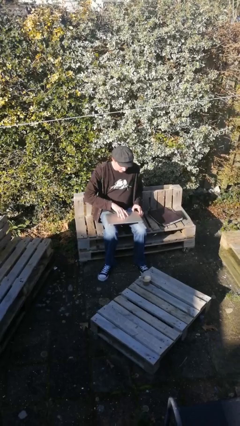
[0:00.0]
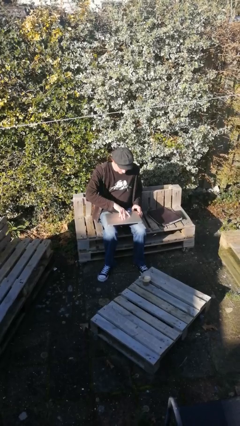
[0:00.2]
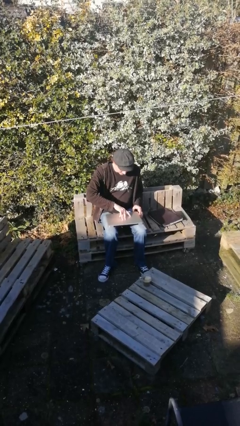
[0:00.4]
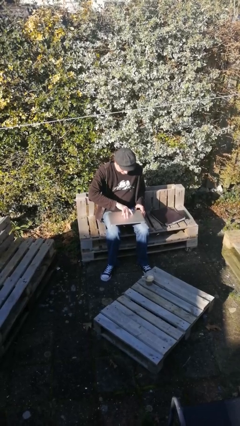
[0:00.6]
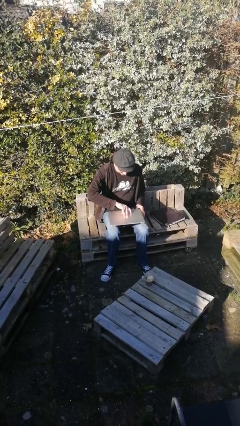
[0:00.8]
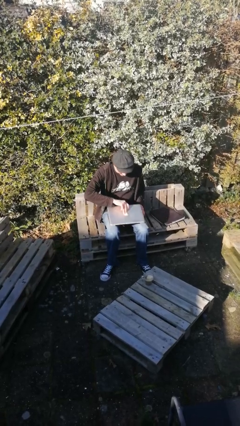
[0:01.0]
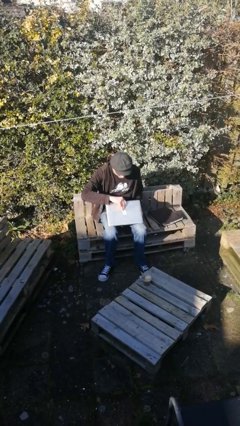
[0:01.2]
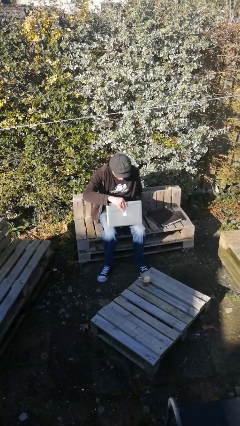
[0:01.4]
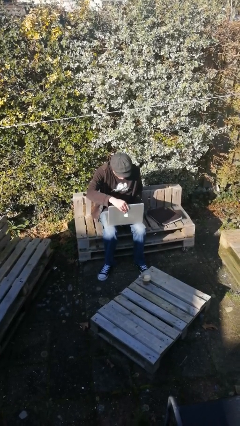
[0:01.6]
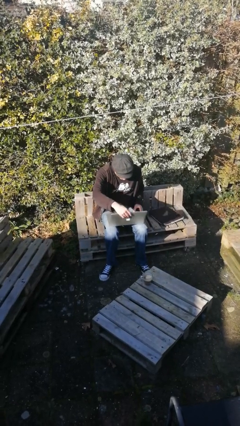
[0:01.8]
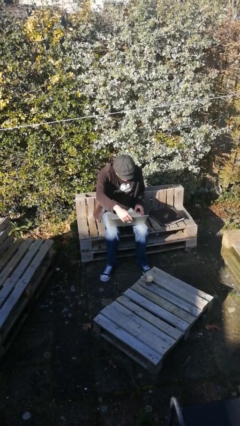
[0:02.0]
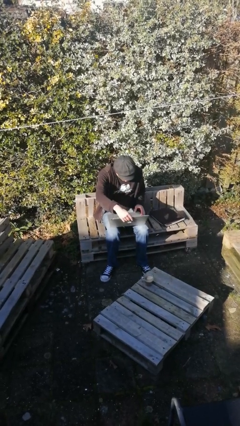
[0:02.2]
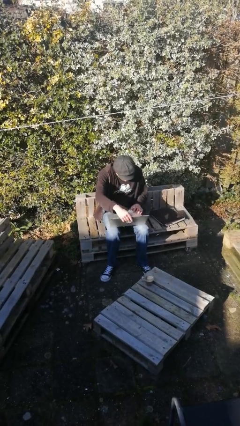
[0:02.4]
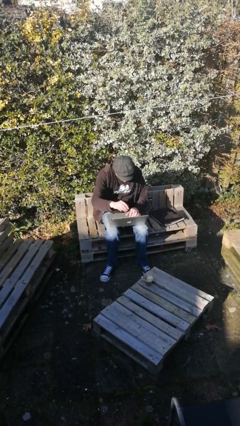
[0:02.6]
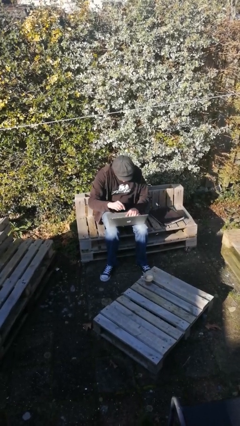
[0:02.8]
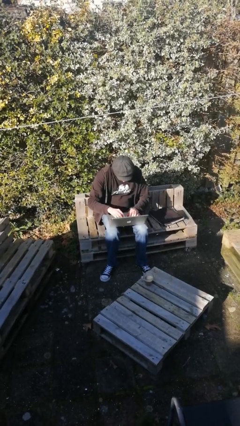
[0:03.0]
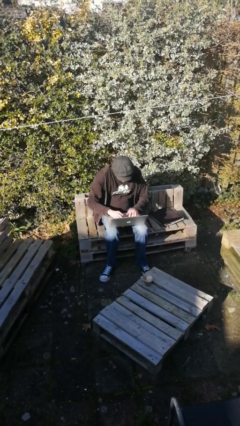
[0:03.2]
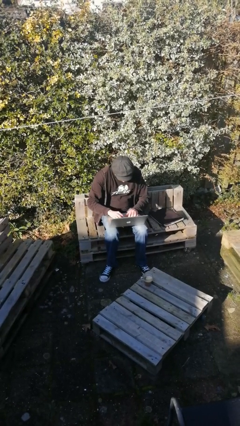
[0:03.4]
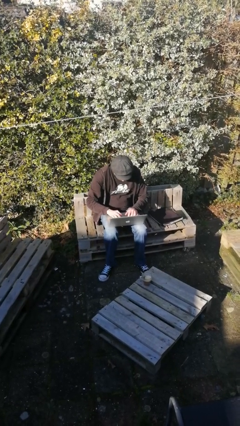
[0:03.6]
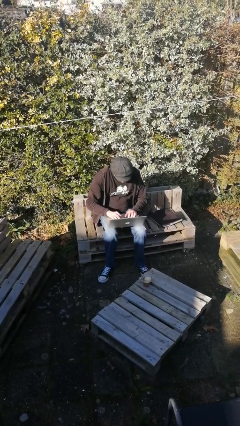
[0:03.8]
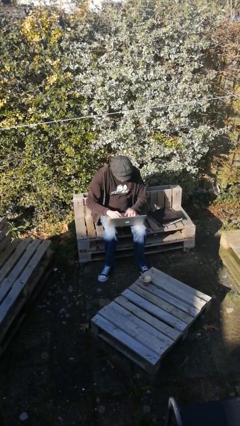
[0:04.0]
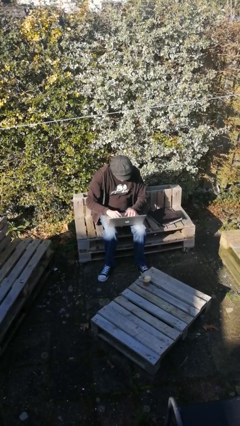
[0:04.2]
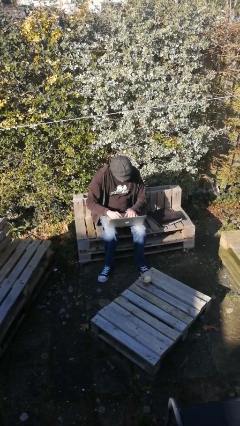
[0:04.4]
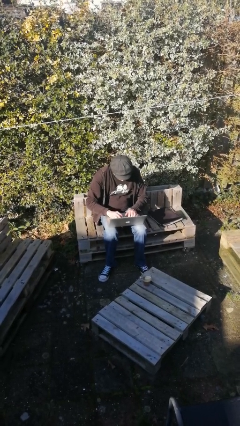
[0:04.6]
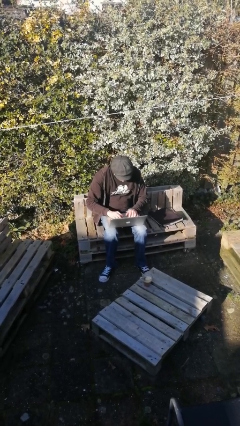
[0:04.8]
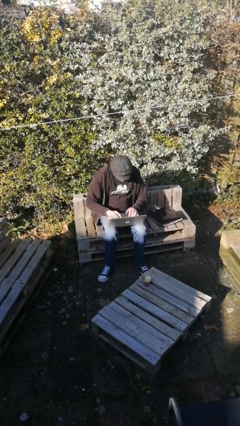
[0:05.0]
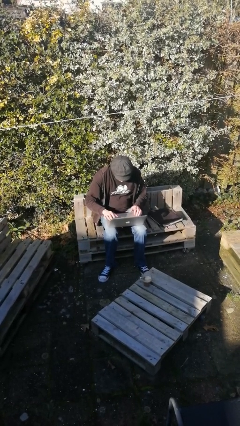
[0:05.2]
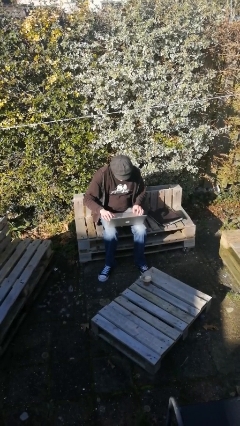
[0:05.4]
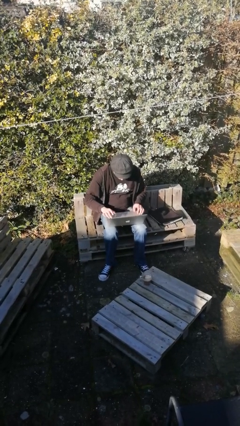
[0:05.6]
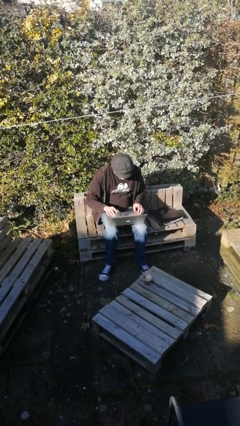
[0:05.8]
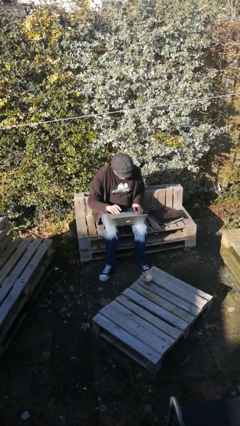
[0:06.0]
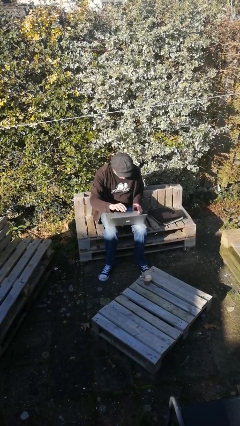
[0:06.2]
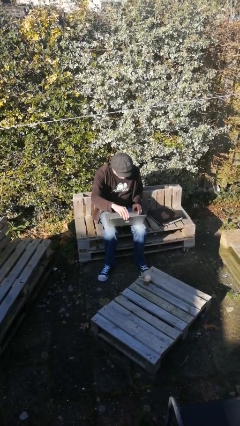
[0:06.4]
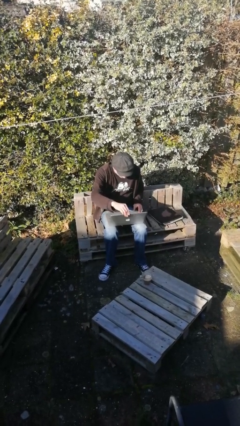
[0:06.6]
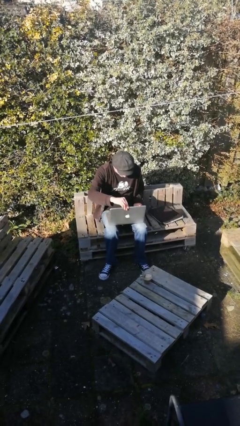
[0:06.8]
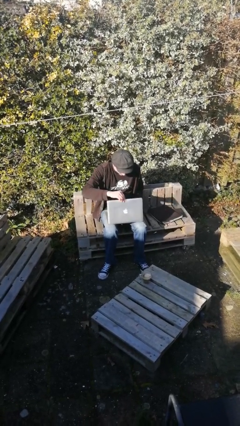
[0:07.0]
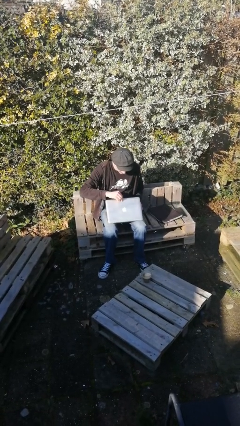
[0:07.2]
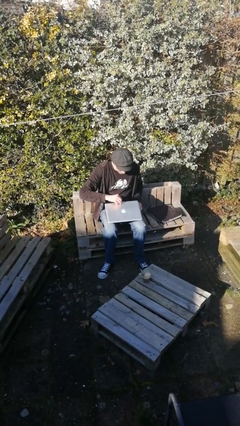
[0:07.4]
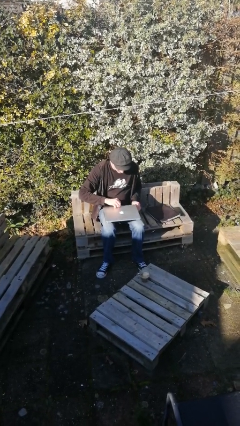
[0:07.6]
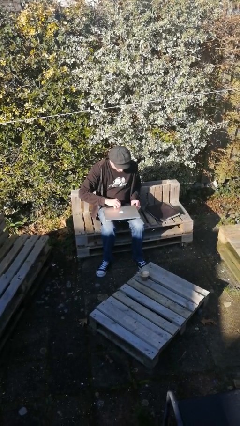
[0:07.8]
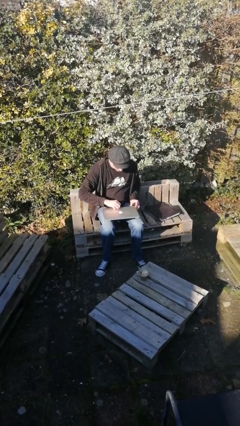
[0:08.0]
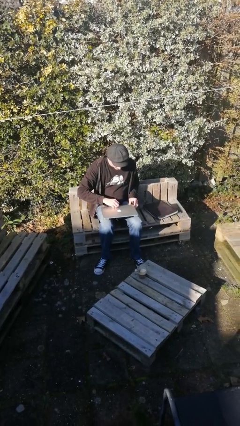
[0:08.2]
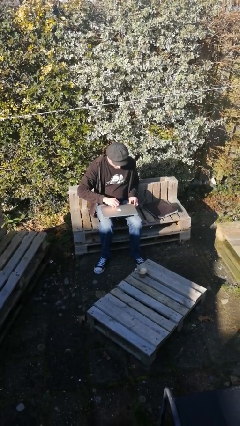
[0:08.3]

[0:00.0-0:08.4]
person interacts with laptop

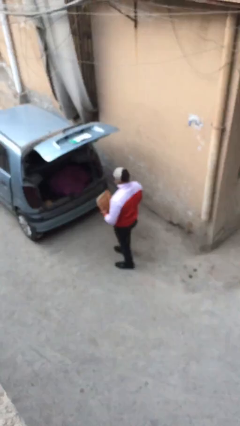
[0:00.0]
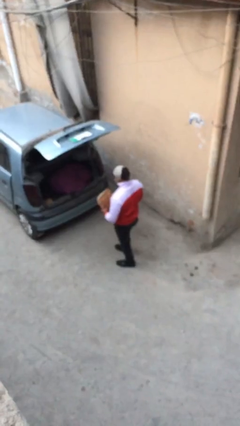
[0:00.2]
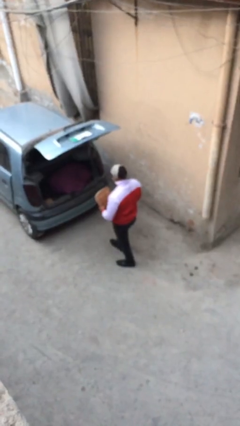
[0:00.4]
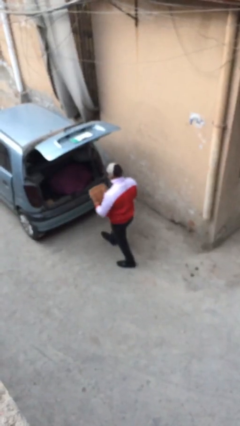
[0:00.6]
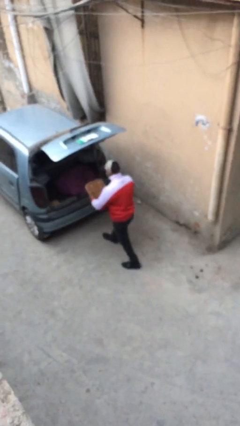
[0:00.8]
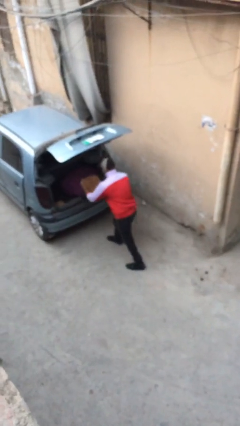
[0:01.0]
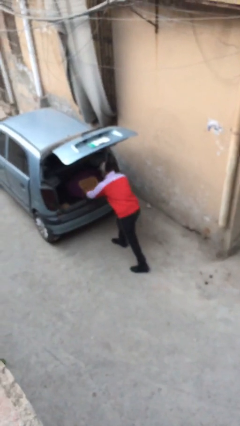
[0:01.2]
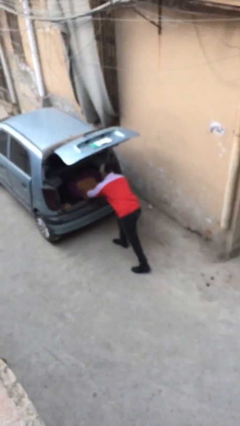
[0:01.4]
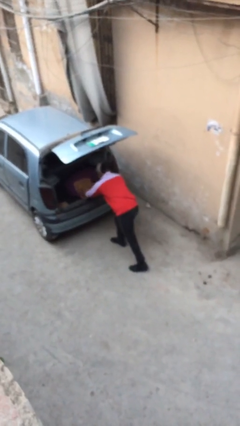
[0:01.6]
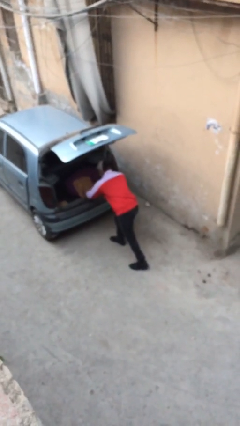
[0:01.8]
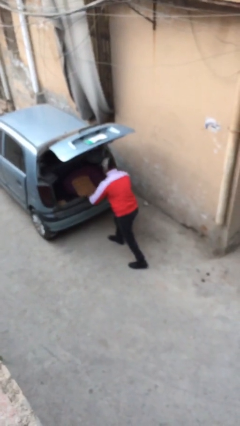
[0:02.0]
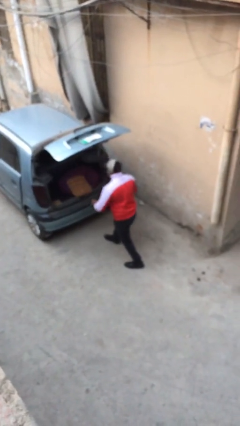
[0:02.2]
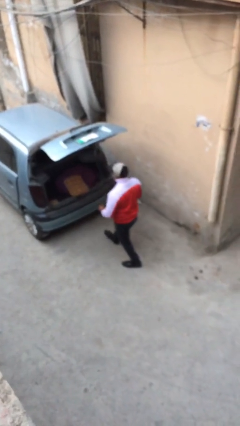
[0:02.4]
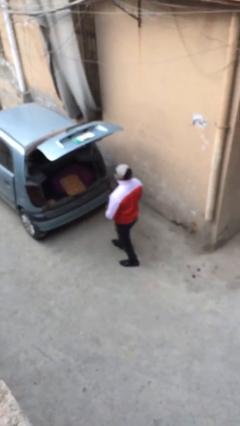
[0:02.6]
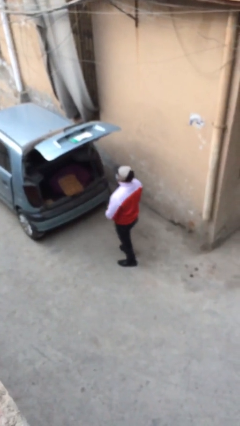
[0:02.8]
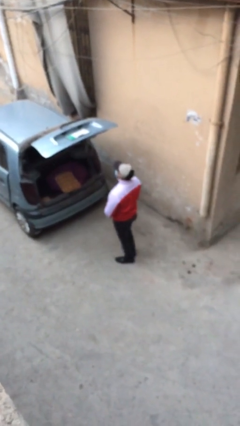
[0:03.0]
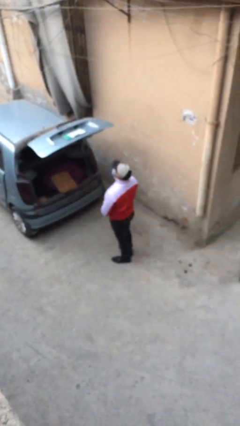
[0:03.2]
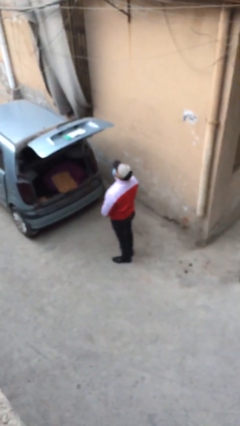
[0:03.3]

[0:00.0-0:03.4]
person loads car

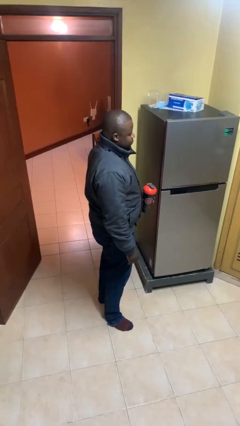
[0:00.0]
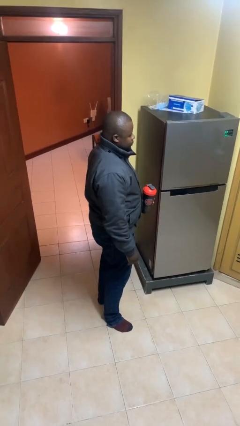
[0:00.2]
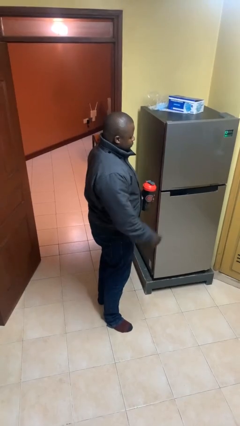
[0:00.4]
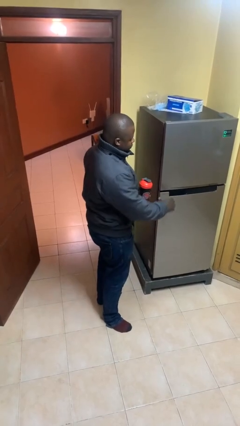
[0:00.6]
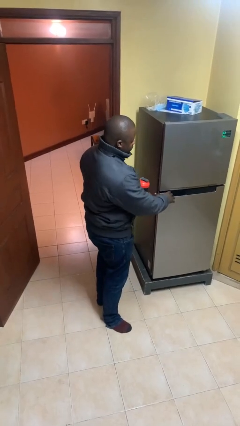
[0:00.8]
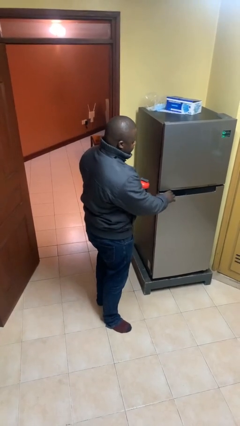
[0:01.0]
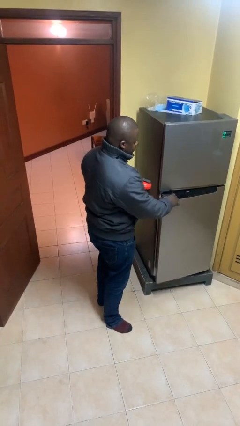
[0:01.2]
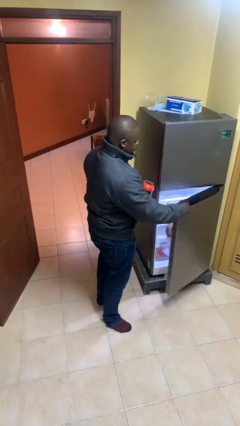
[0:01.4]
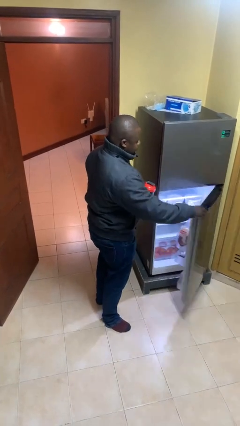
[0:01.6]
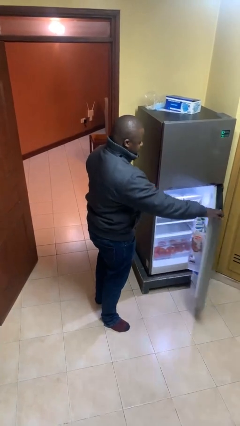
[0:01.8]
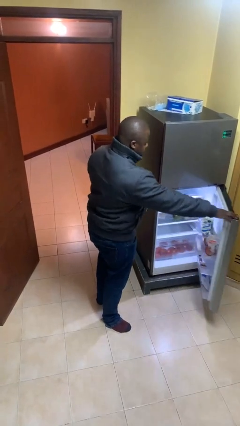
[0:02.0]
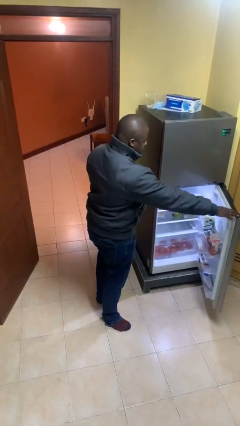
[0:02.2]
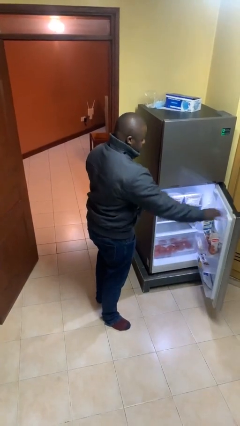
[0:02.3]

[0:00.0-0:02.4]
person opens refrigerator

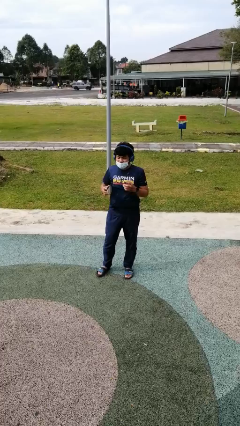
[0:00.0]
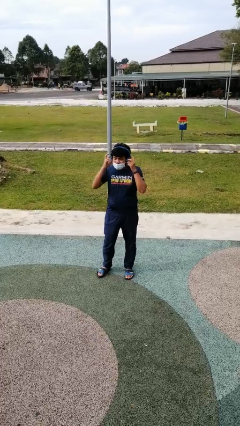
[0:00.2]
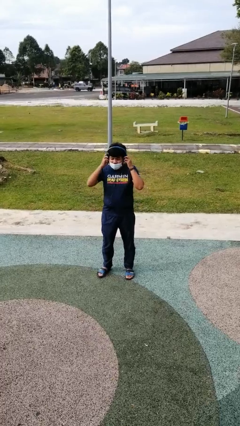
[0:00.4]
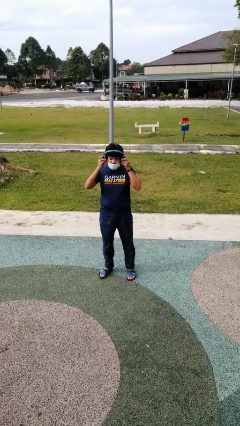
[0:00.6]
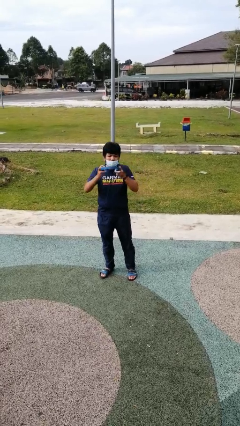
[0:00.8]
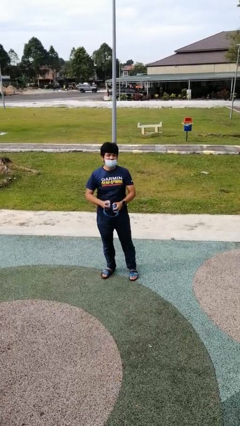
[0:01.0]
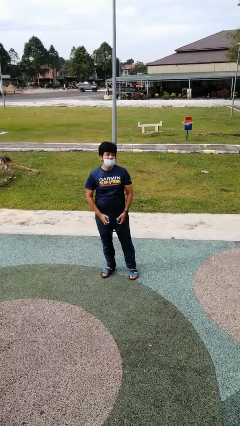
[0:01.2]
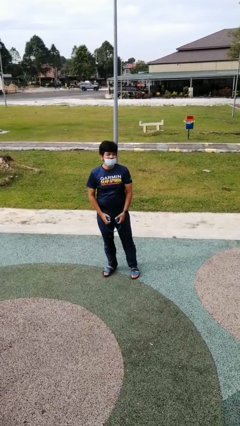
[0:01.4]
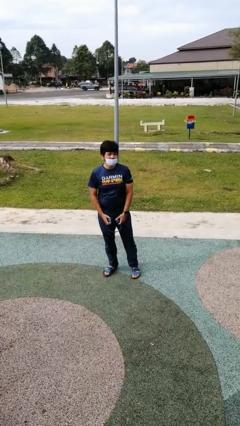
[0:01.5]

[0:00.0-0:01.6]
person takes off headphones

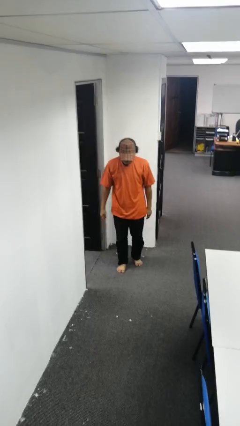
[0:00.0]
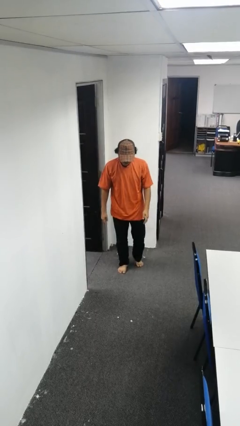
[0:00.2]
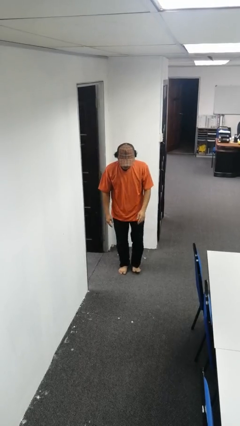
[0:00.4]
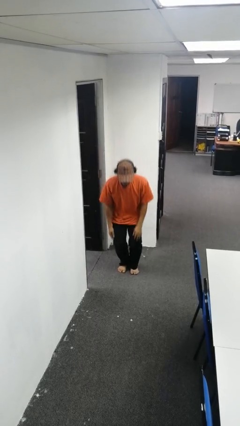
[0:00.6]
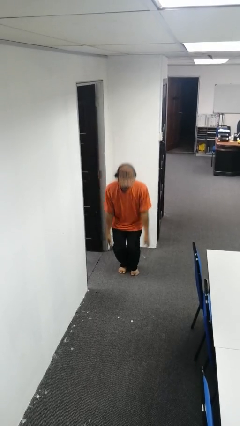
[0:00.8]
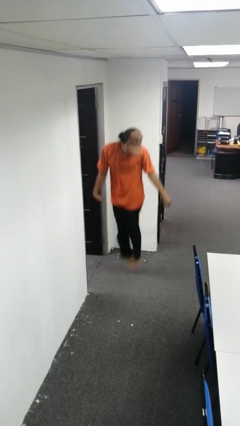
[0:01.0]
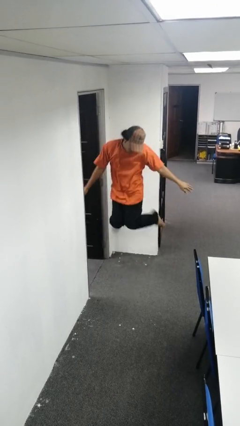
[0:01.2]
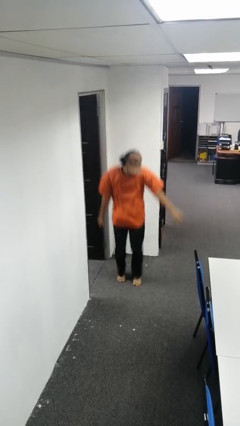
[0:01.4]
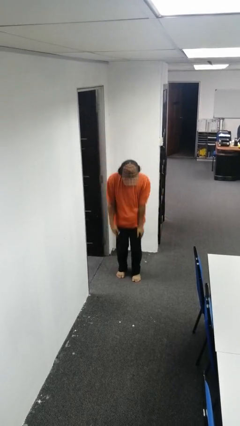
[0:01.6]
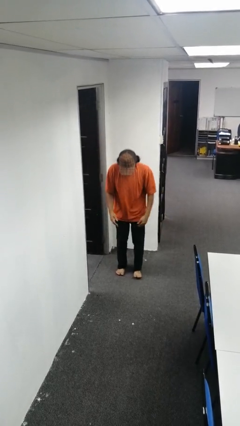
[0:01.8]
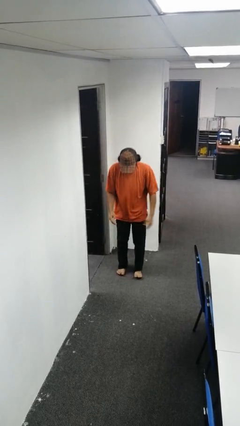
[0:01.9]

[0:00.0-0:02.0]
person jumps
